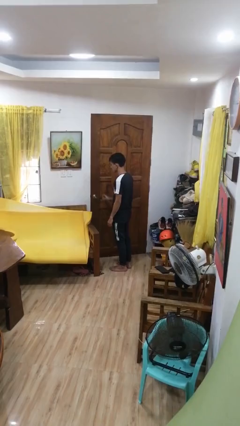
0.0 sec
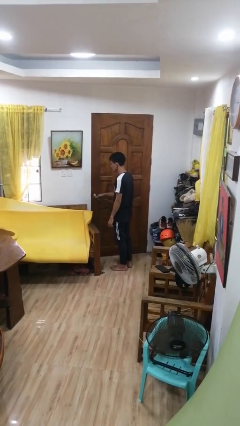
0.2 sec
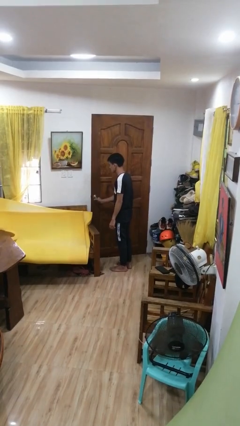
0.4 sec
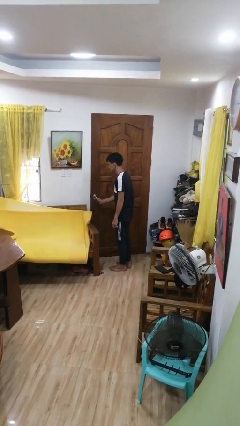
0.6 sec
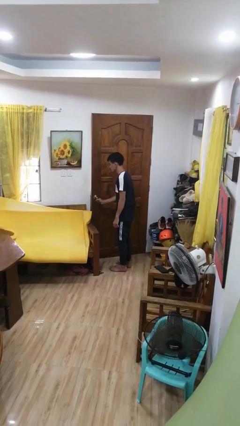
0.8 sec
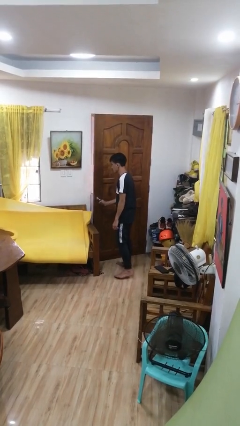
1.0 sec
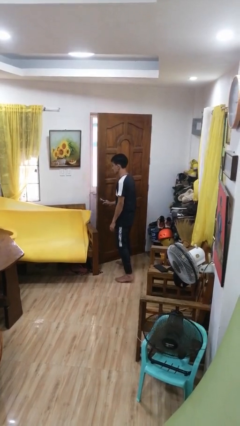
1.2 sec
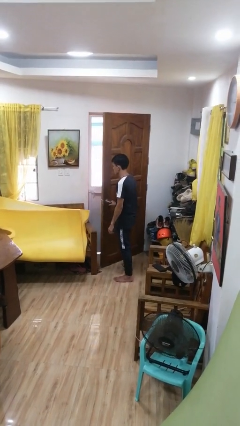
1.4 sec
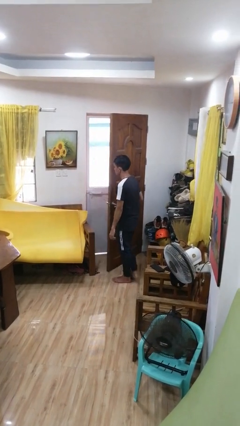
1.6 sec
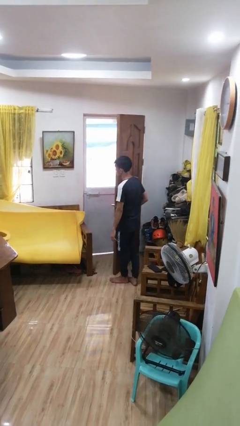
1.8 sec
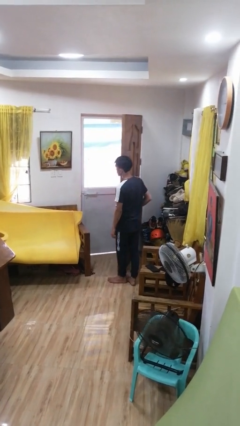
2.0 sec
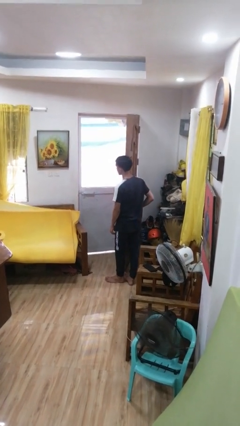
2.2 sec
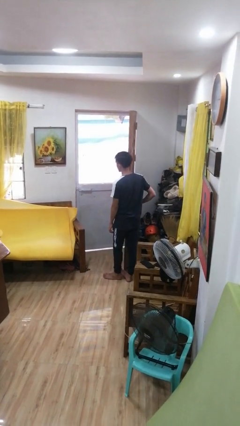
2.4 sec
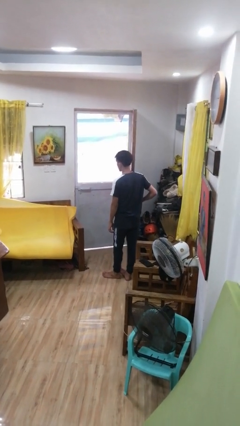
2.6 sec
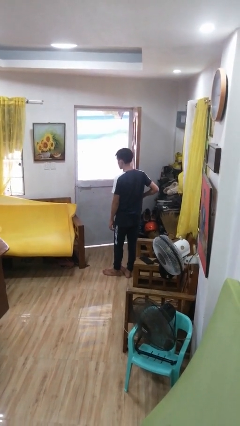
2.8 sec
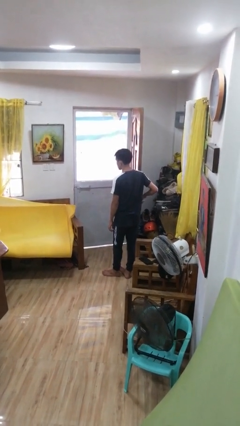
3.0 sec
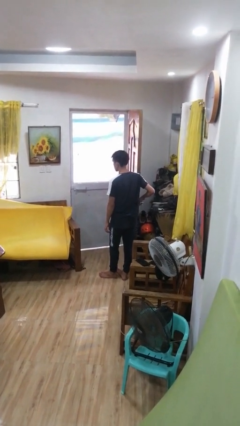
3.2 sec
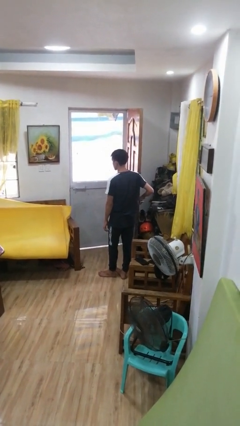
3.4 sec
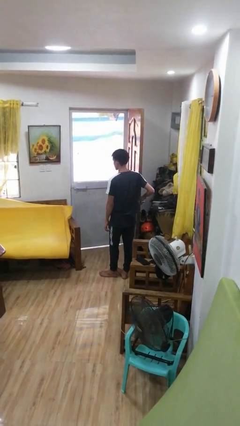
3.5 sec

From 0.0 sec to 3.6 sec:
person opens facility door

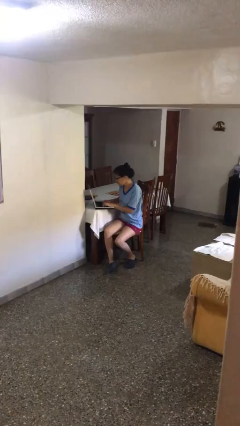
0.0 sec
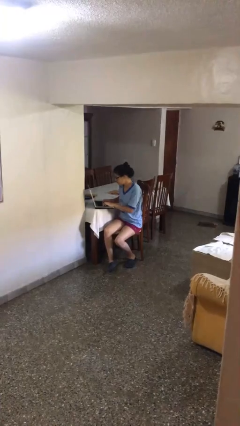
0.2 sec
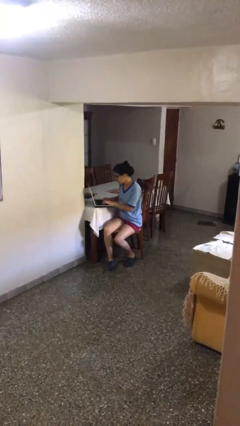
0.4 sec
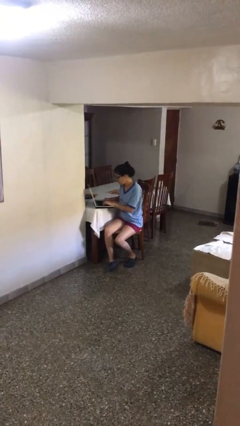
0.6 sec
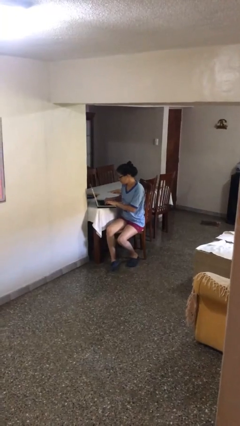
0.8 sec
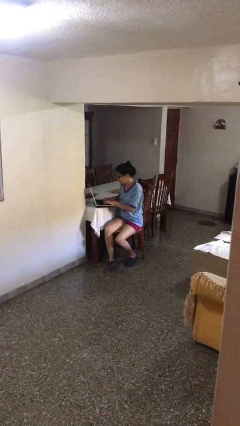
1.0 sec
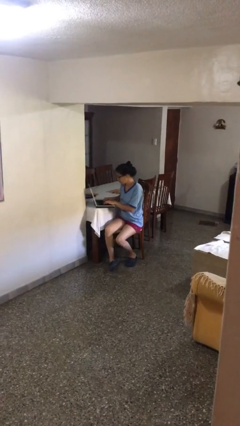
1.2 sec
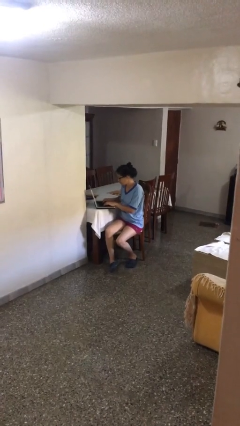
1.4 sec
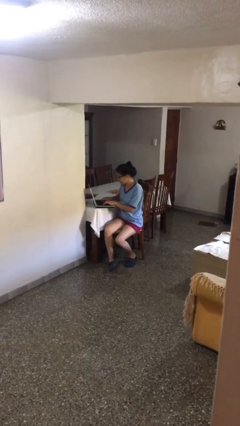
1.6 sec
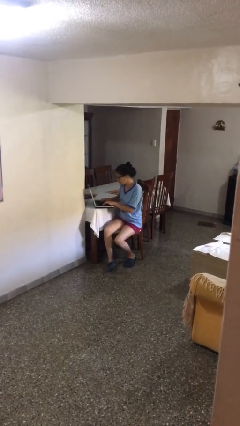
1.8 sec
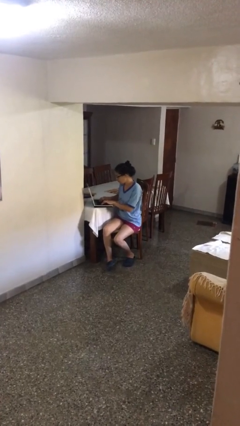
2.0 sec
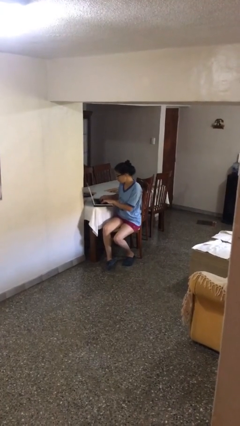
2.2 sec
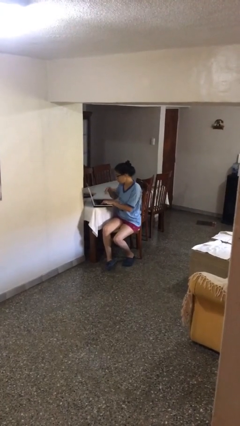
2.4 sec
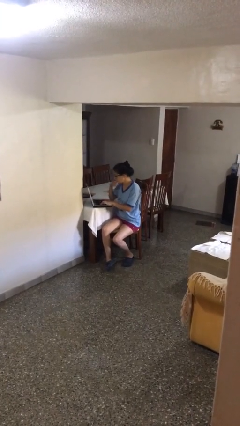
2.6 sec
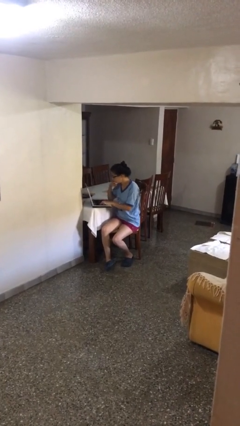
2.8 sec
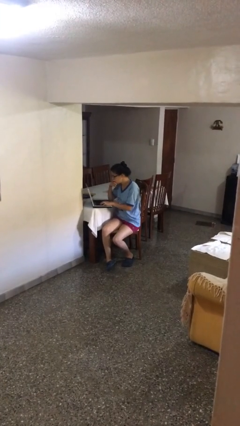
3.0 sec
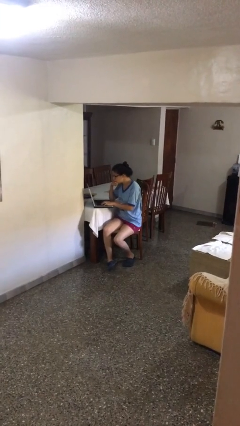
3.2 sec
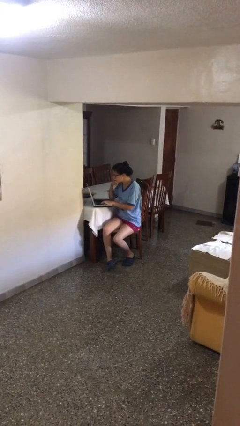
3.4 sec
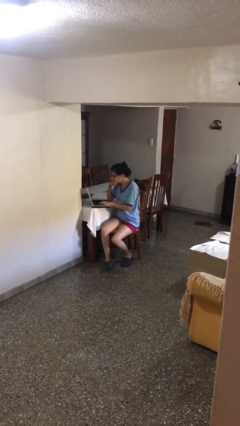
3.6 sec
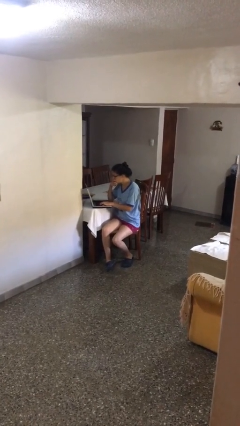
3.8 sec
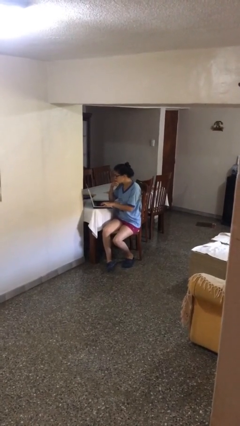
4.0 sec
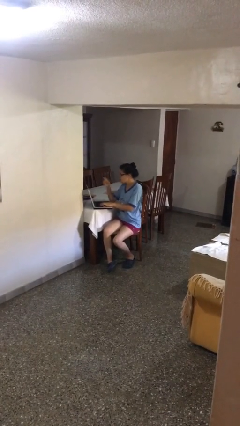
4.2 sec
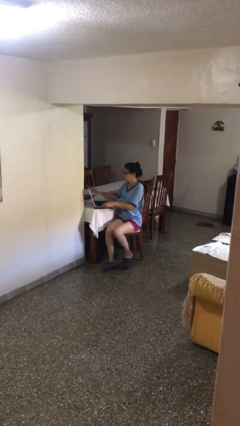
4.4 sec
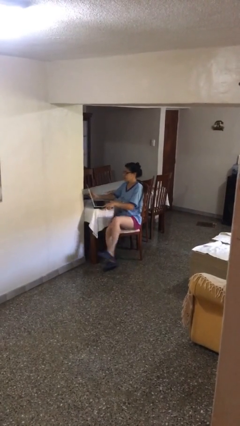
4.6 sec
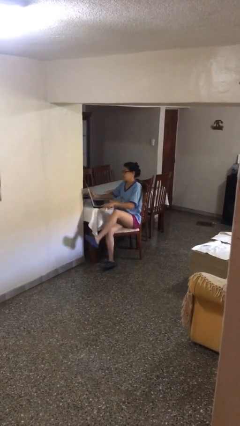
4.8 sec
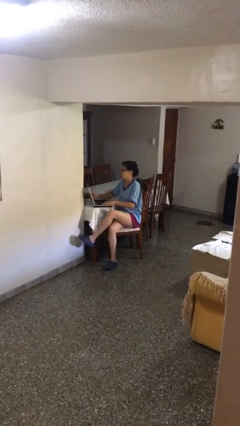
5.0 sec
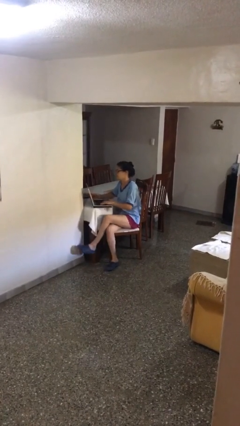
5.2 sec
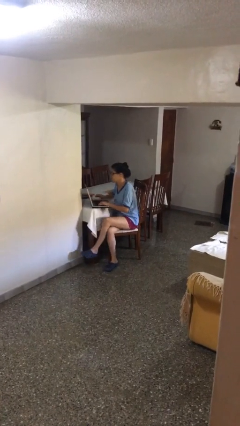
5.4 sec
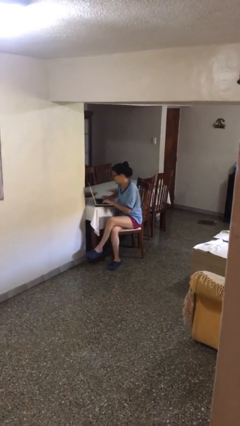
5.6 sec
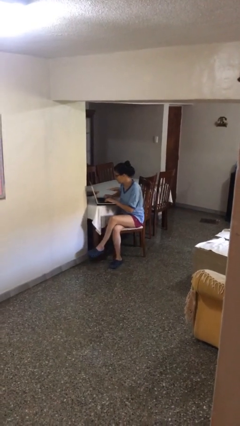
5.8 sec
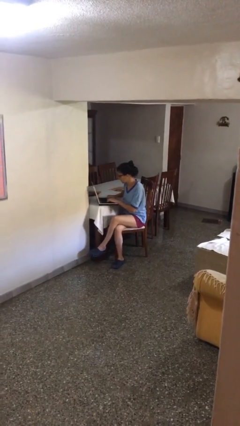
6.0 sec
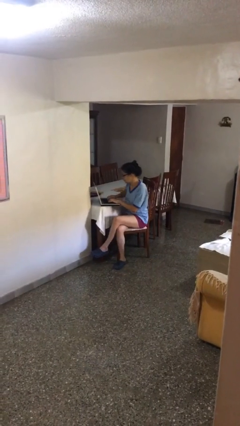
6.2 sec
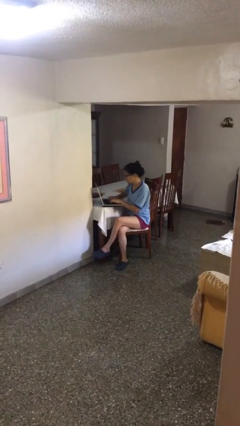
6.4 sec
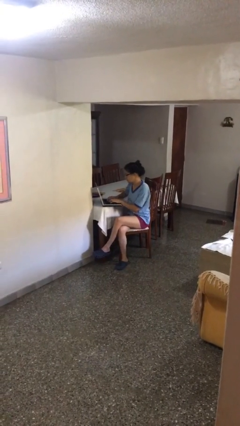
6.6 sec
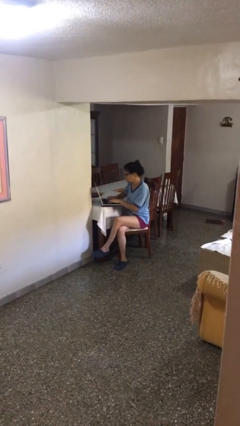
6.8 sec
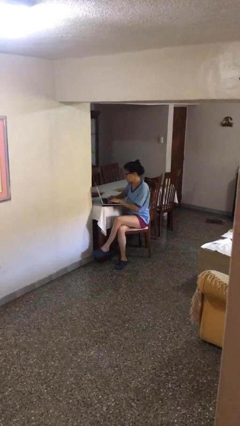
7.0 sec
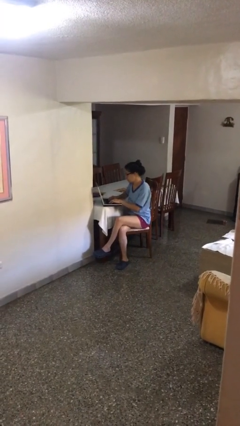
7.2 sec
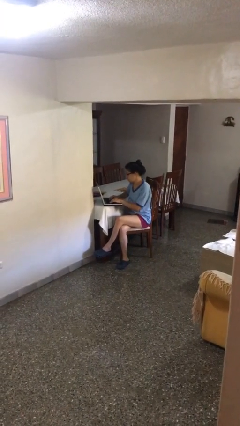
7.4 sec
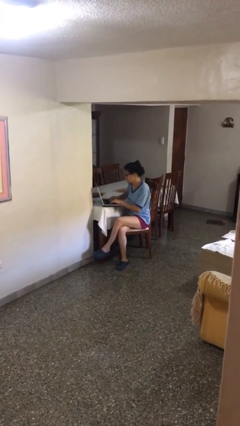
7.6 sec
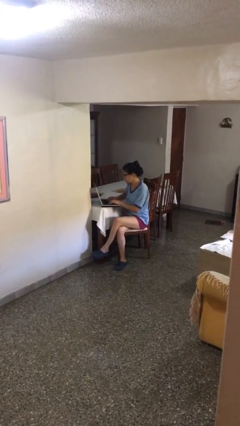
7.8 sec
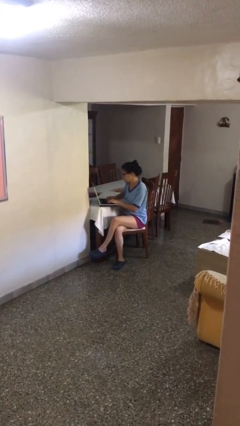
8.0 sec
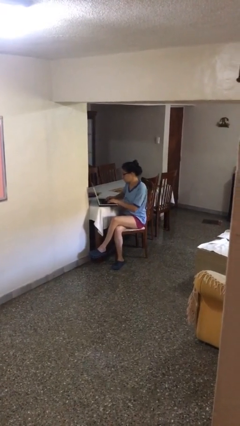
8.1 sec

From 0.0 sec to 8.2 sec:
person interacts with laptop

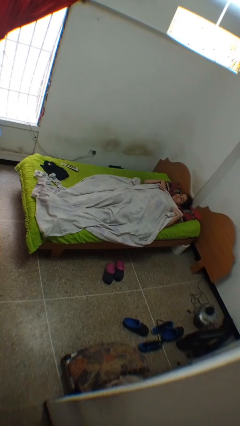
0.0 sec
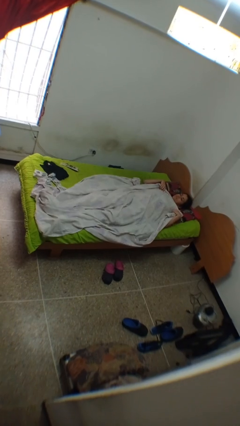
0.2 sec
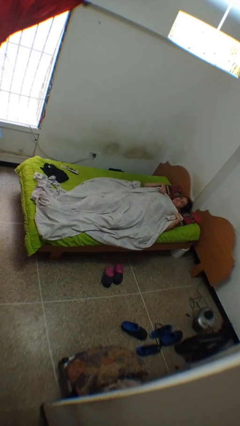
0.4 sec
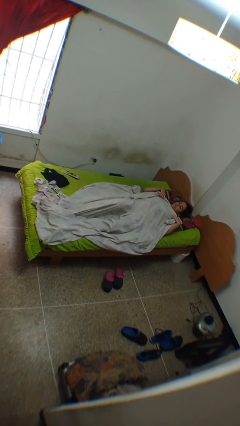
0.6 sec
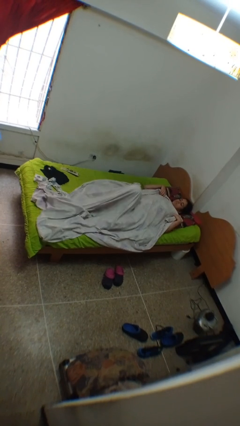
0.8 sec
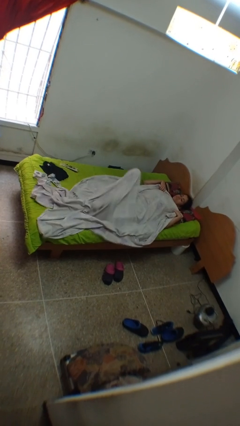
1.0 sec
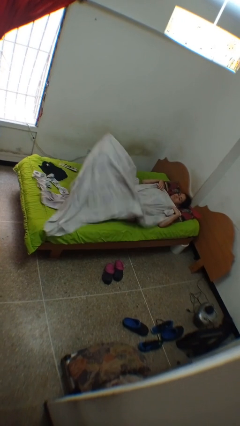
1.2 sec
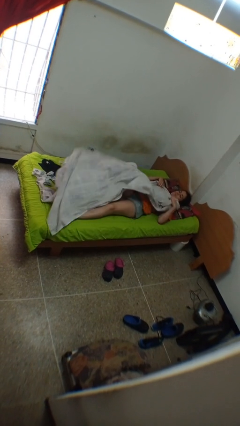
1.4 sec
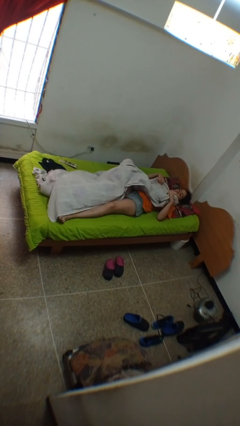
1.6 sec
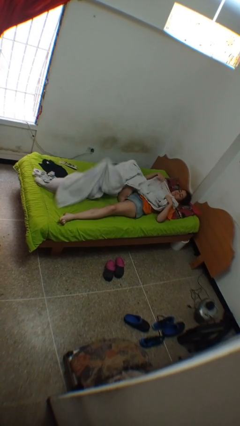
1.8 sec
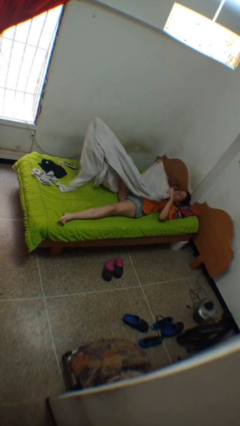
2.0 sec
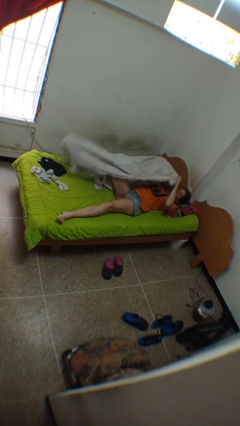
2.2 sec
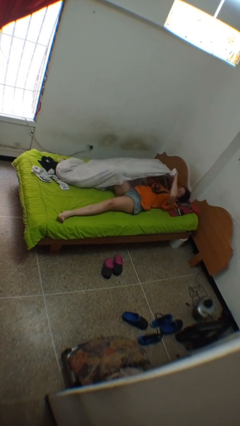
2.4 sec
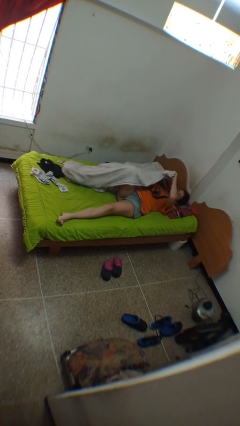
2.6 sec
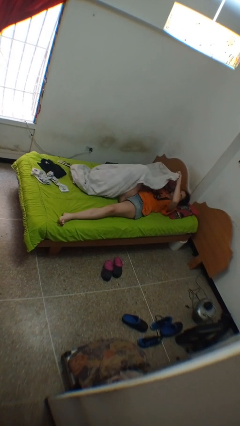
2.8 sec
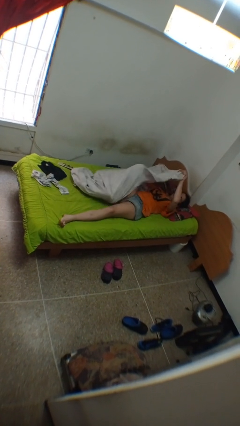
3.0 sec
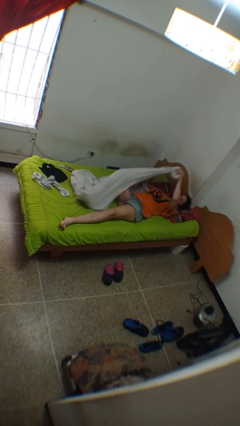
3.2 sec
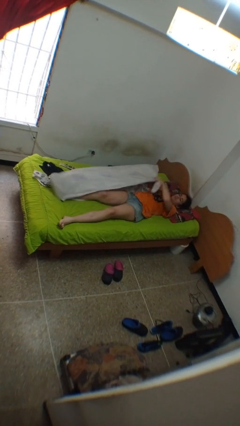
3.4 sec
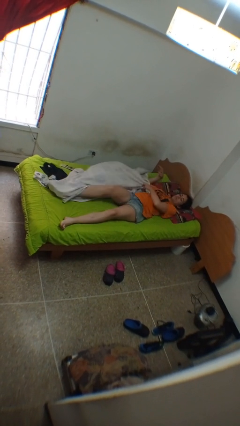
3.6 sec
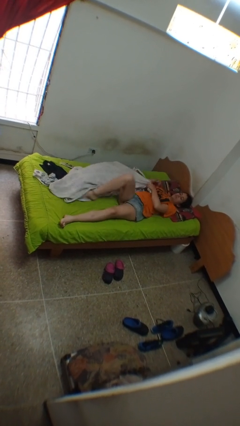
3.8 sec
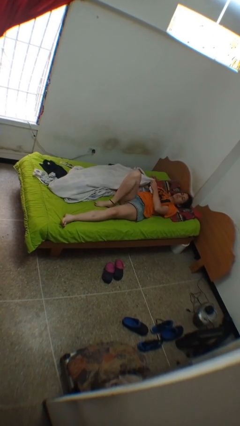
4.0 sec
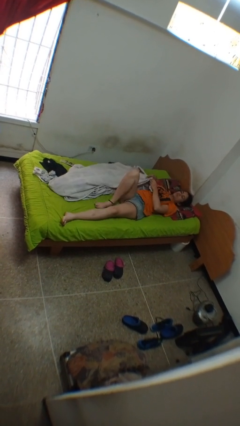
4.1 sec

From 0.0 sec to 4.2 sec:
person uncovers with bedsheets

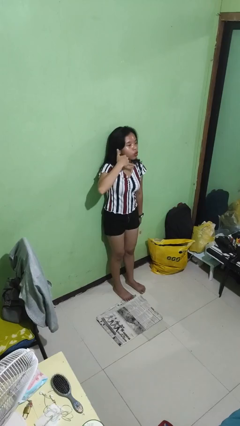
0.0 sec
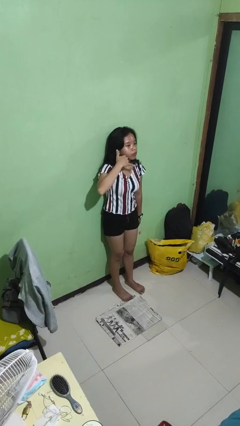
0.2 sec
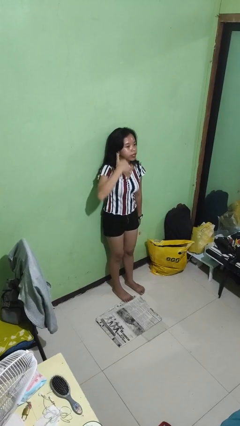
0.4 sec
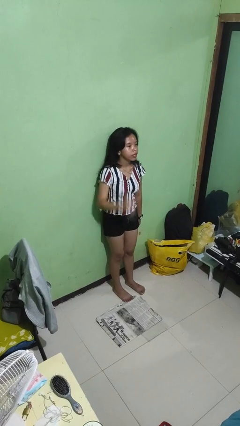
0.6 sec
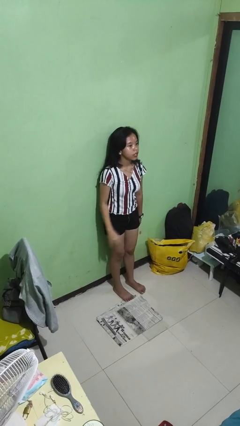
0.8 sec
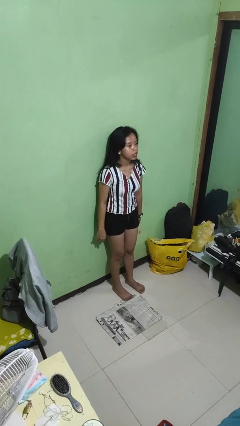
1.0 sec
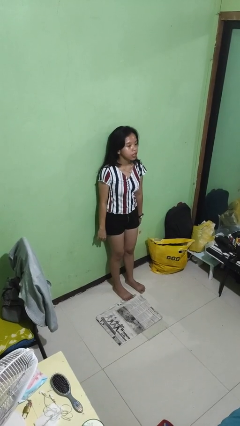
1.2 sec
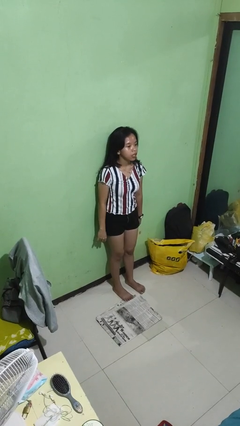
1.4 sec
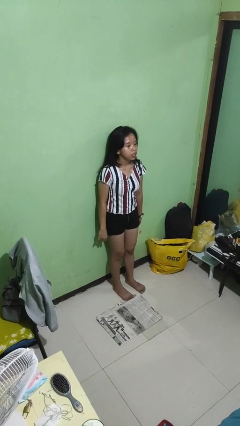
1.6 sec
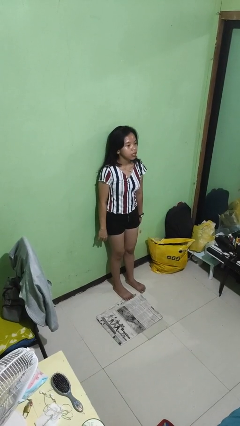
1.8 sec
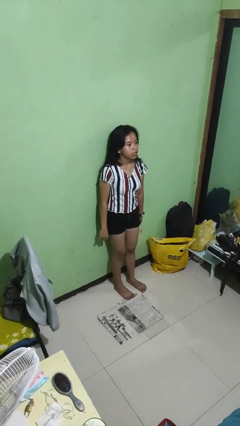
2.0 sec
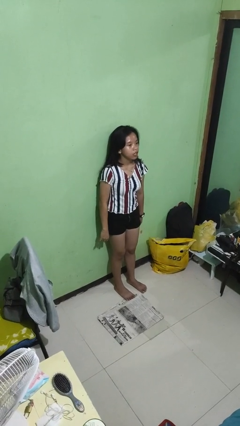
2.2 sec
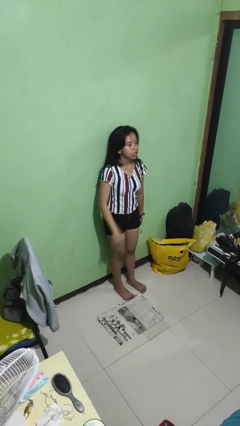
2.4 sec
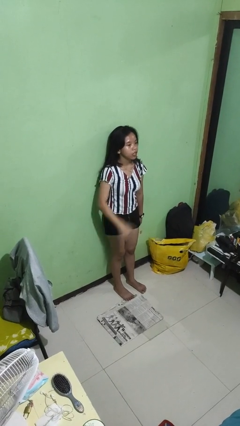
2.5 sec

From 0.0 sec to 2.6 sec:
person picks up object from floor
